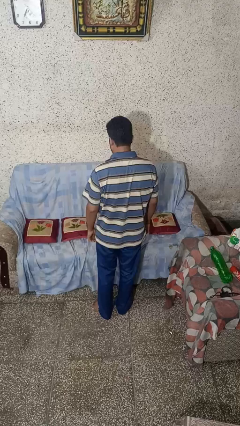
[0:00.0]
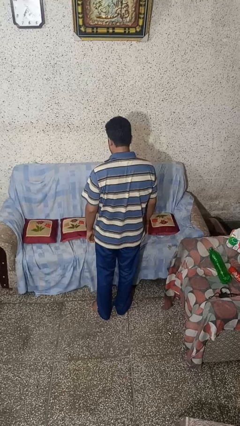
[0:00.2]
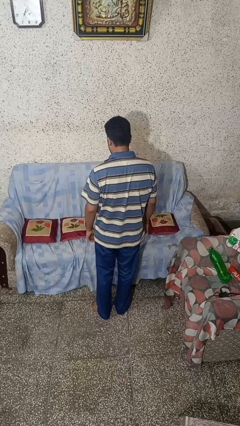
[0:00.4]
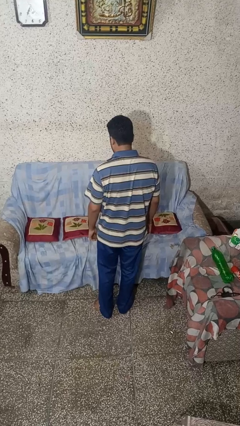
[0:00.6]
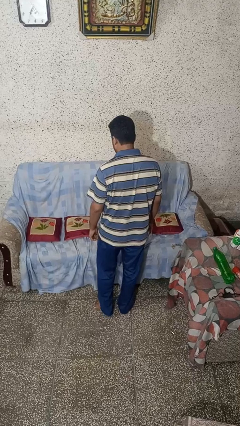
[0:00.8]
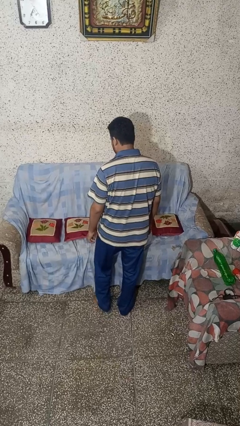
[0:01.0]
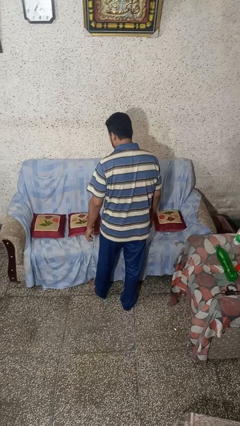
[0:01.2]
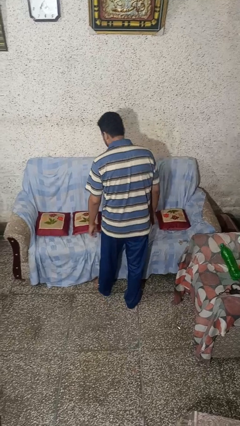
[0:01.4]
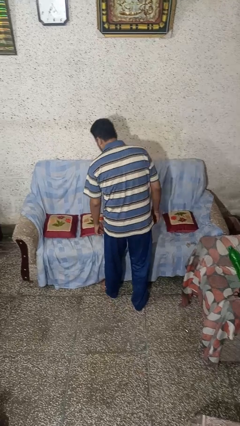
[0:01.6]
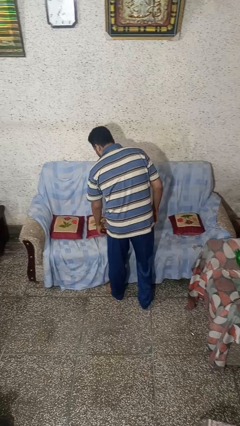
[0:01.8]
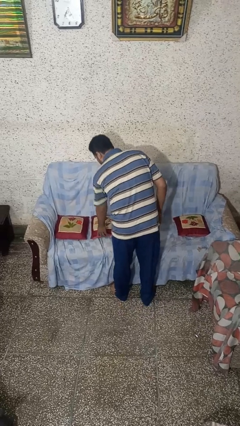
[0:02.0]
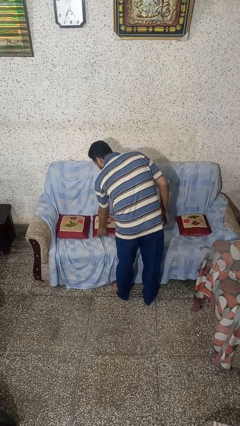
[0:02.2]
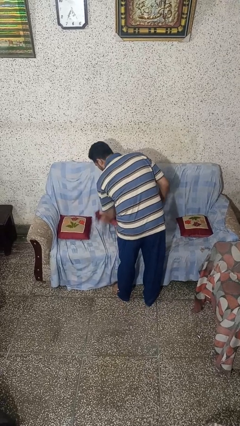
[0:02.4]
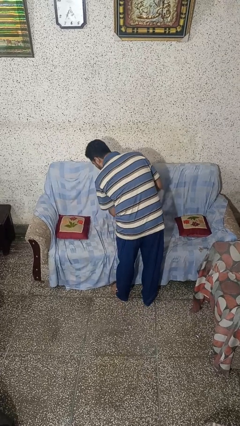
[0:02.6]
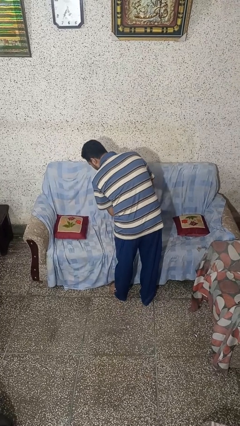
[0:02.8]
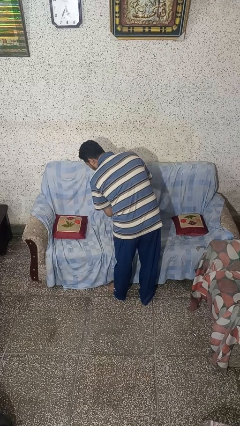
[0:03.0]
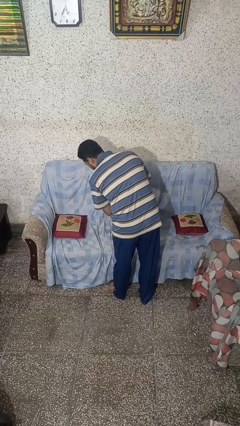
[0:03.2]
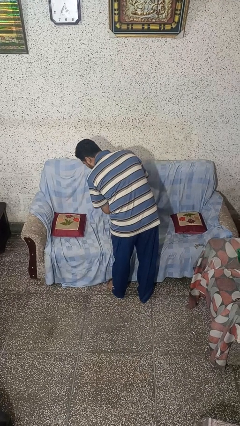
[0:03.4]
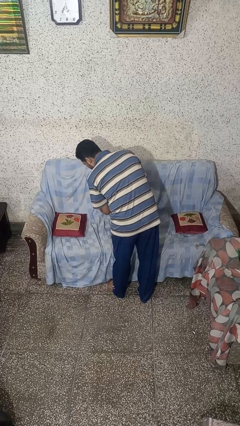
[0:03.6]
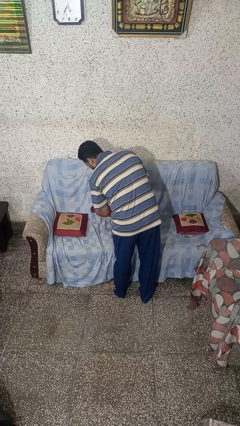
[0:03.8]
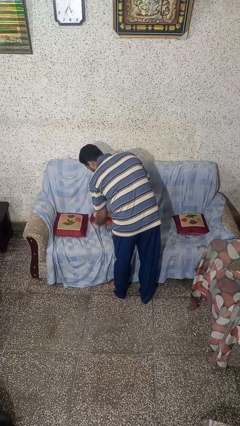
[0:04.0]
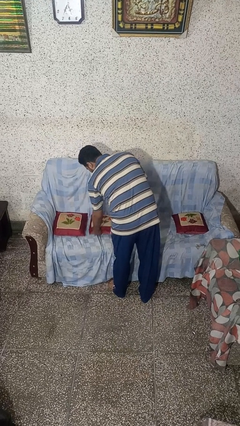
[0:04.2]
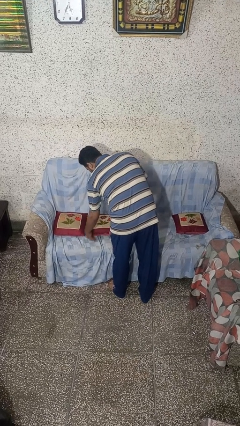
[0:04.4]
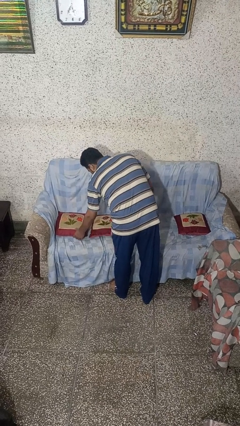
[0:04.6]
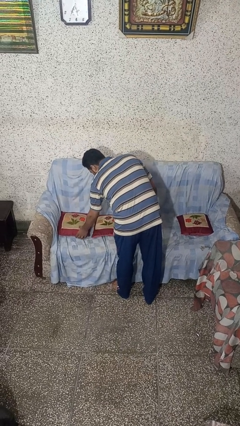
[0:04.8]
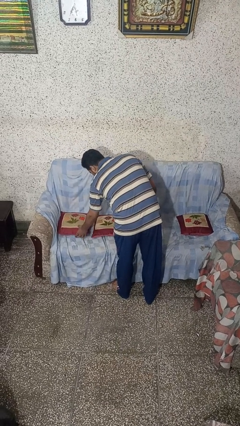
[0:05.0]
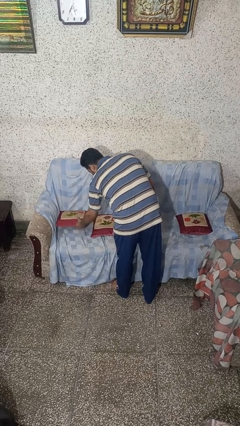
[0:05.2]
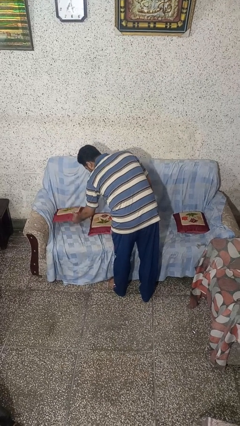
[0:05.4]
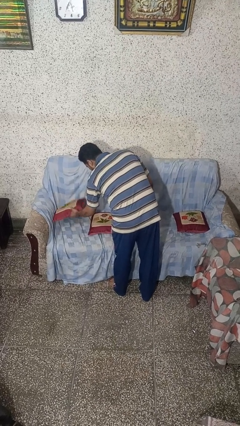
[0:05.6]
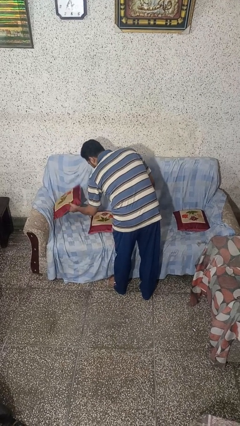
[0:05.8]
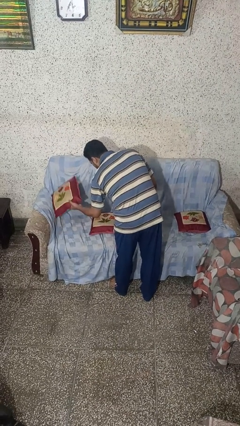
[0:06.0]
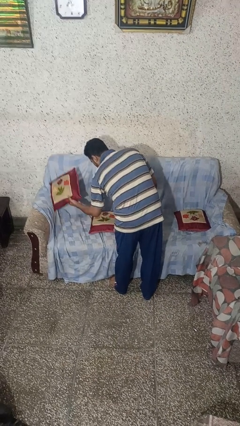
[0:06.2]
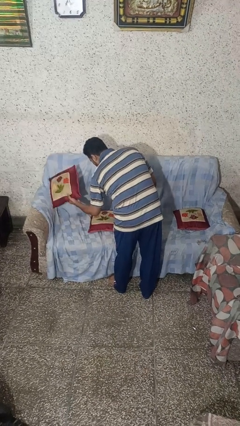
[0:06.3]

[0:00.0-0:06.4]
person searches in couch

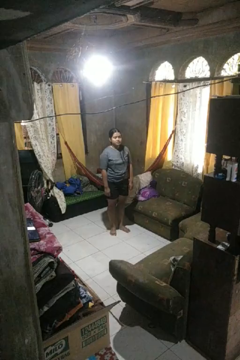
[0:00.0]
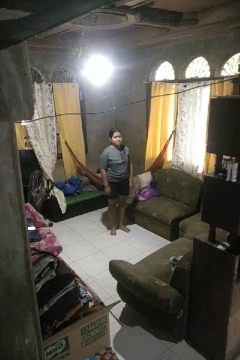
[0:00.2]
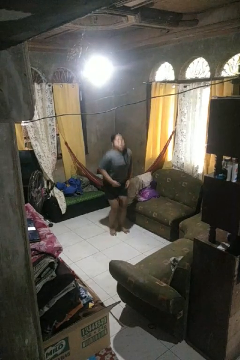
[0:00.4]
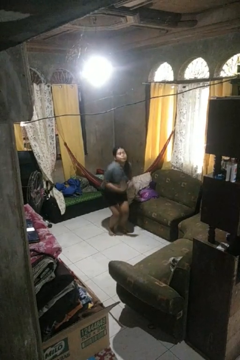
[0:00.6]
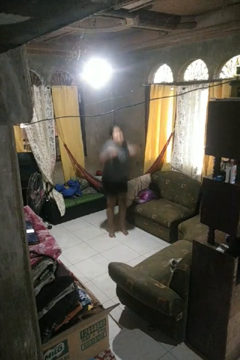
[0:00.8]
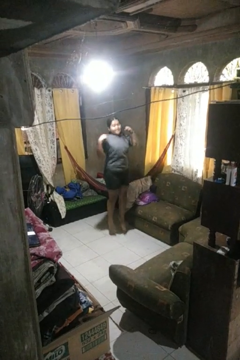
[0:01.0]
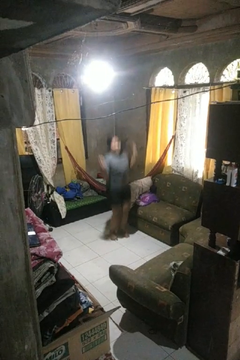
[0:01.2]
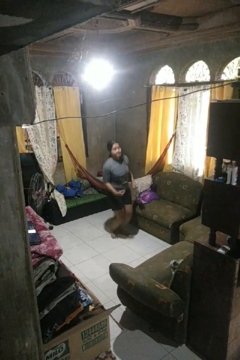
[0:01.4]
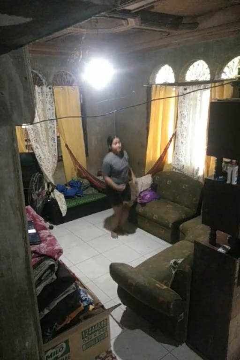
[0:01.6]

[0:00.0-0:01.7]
person jumps

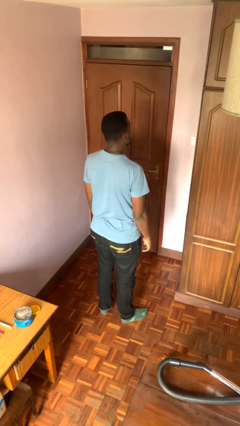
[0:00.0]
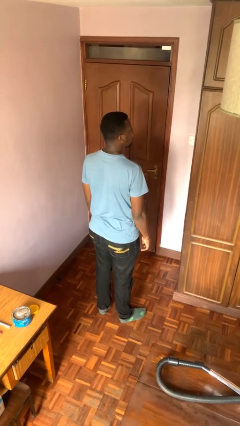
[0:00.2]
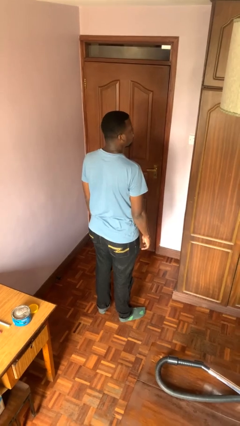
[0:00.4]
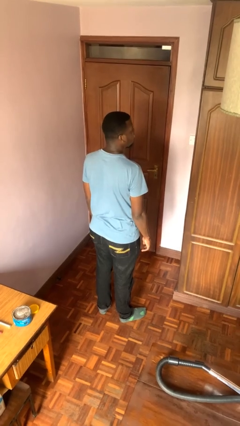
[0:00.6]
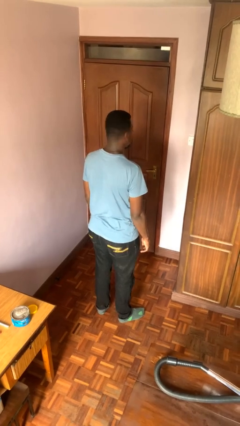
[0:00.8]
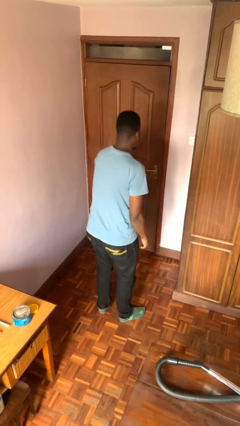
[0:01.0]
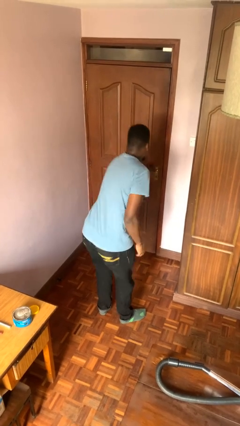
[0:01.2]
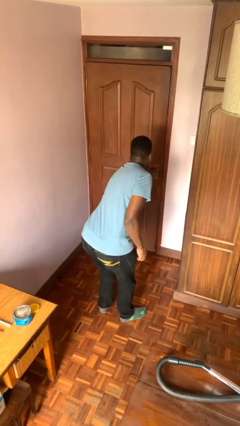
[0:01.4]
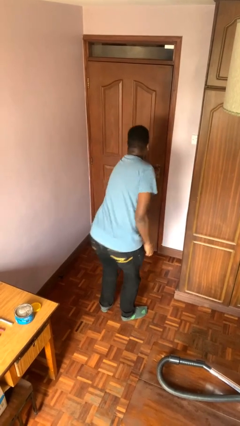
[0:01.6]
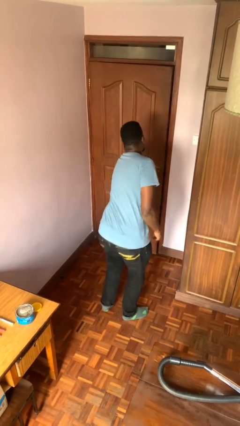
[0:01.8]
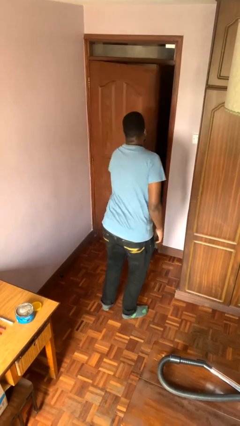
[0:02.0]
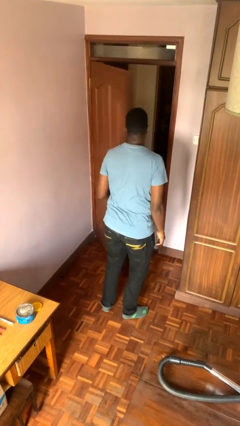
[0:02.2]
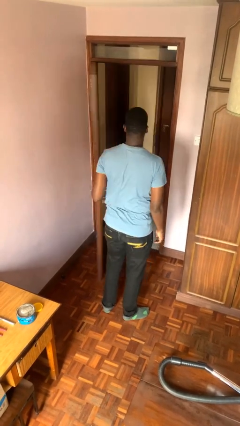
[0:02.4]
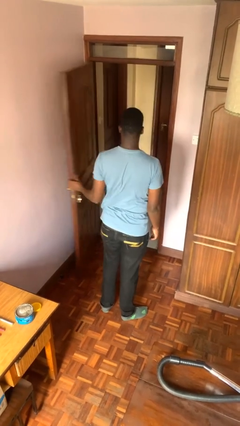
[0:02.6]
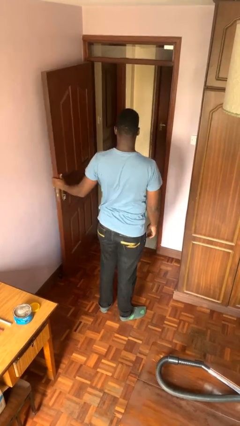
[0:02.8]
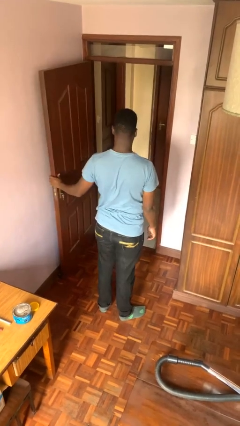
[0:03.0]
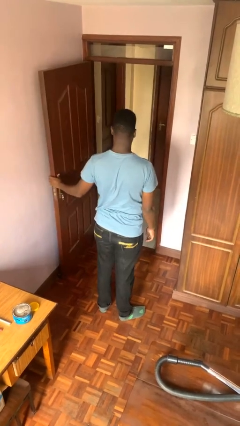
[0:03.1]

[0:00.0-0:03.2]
person opens facility door

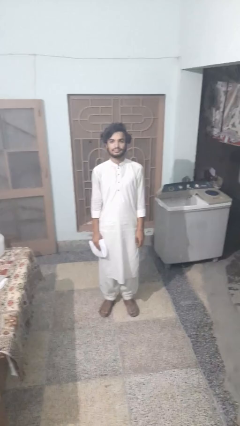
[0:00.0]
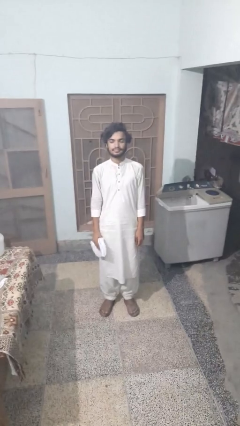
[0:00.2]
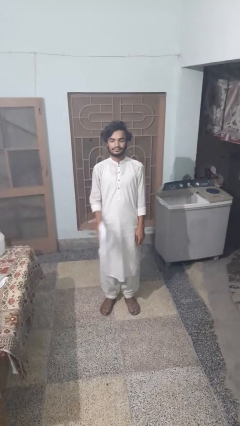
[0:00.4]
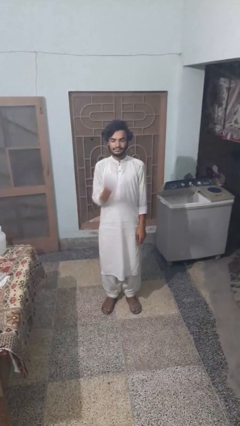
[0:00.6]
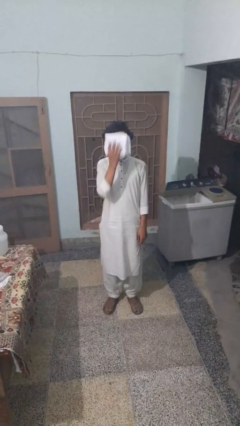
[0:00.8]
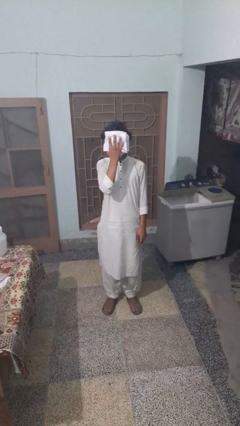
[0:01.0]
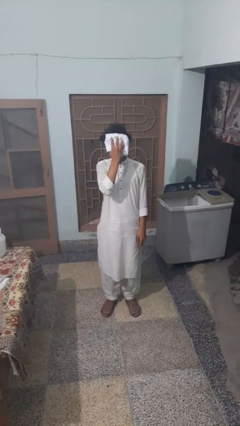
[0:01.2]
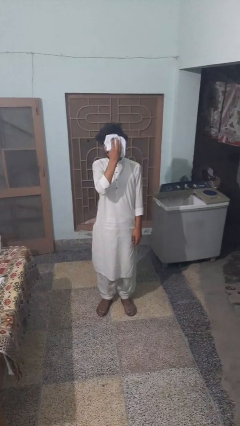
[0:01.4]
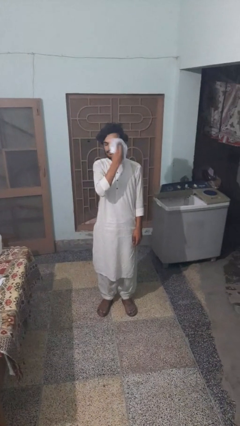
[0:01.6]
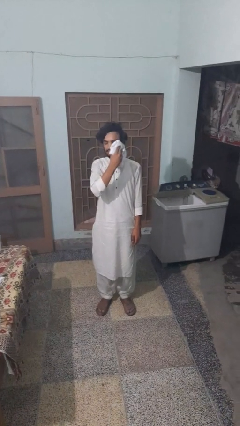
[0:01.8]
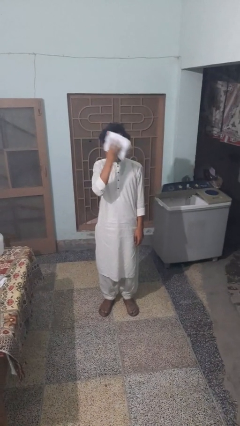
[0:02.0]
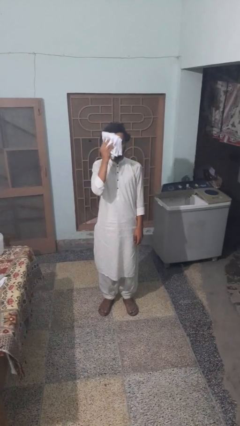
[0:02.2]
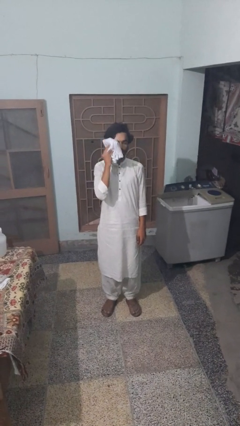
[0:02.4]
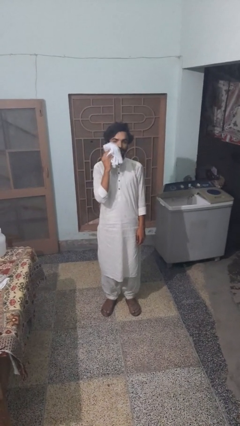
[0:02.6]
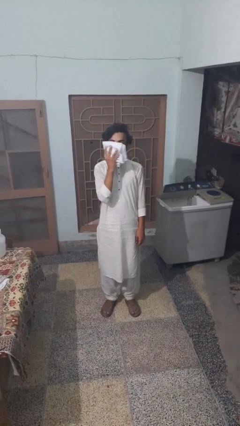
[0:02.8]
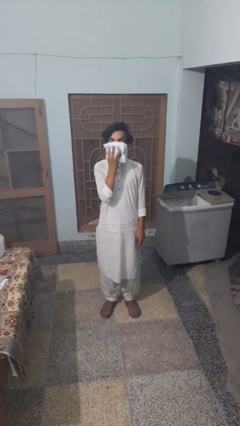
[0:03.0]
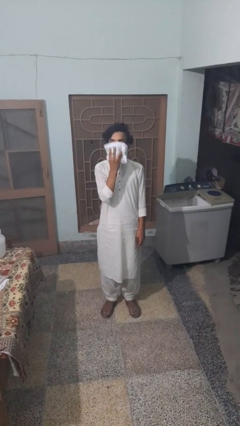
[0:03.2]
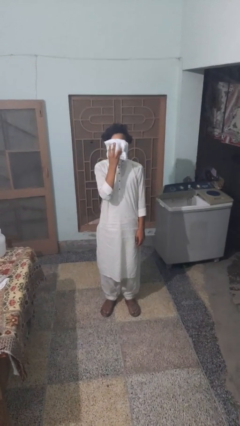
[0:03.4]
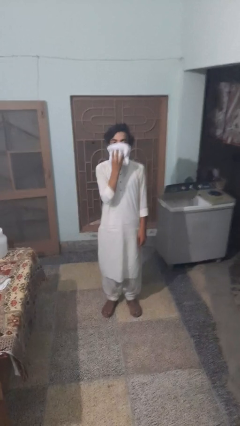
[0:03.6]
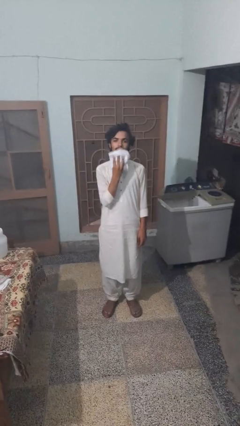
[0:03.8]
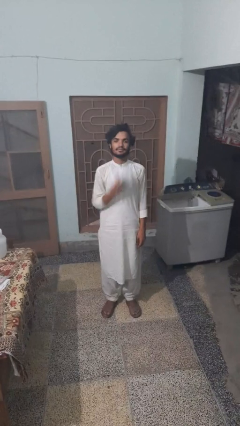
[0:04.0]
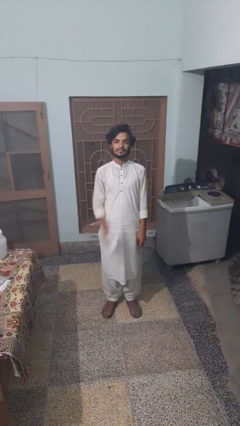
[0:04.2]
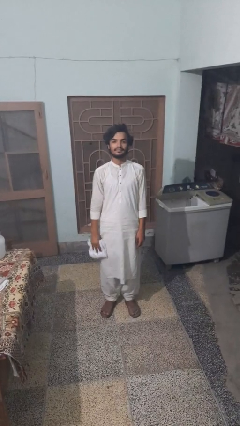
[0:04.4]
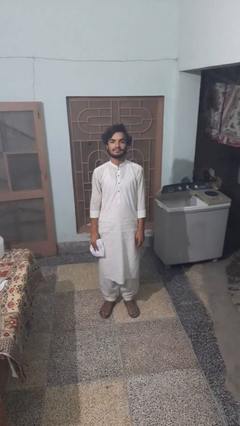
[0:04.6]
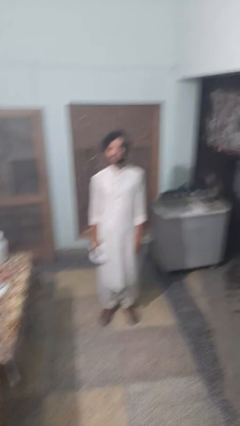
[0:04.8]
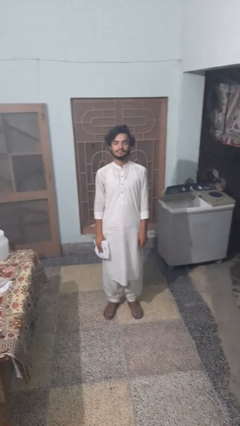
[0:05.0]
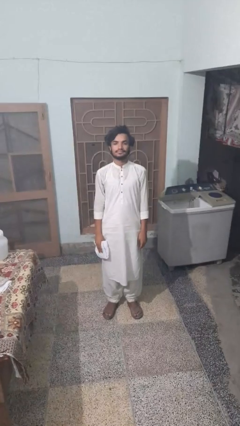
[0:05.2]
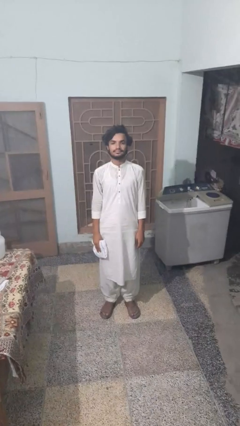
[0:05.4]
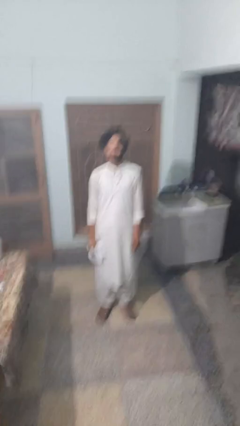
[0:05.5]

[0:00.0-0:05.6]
person wipes mouth with napkin

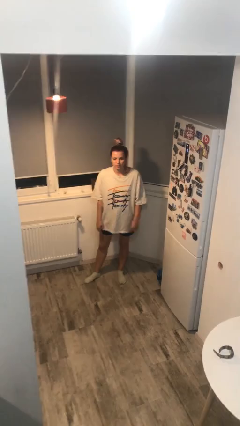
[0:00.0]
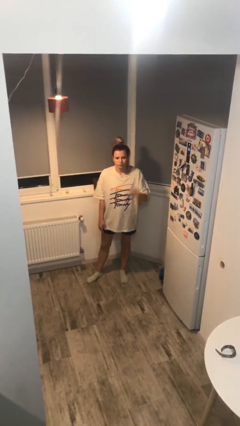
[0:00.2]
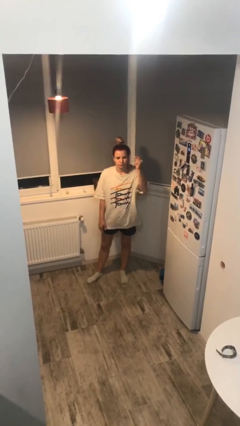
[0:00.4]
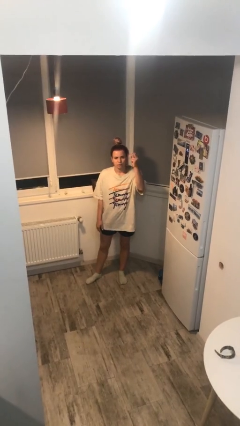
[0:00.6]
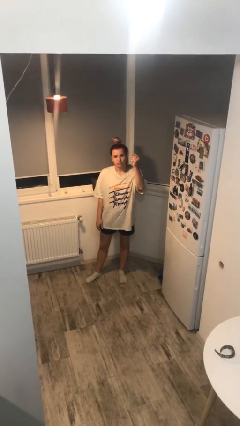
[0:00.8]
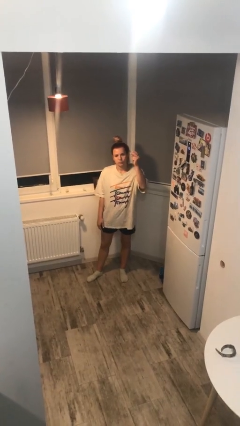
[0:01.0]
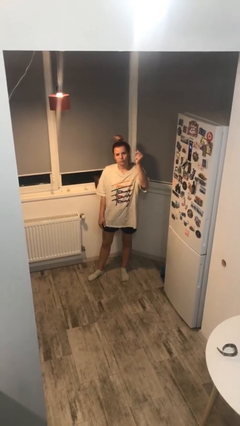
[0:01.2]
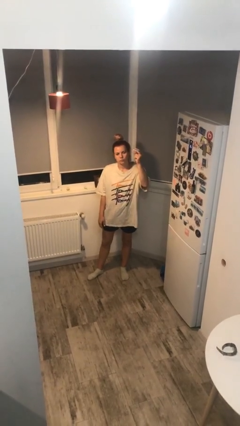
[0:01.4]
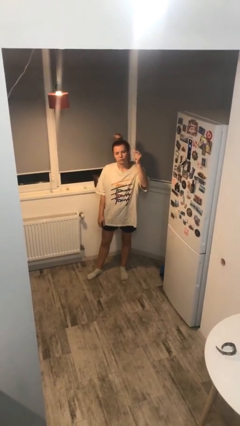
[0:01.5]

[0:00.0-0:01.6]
person snaps fingers
